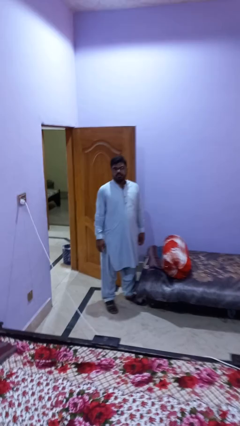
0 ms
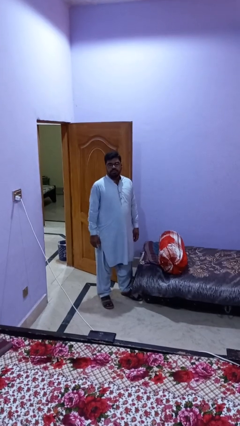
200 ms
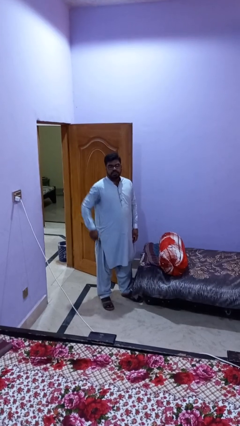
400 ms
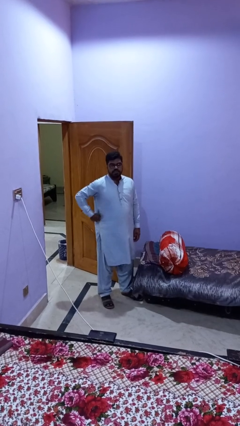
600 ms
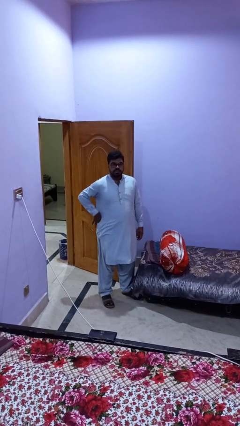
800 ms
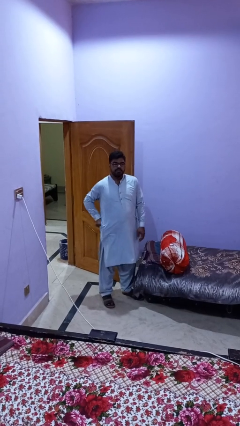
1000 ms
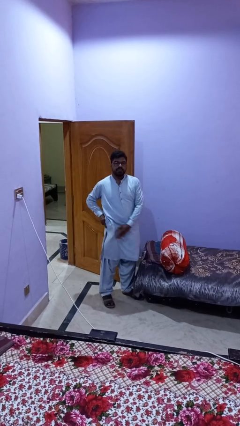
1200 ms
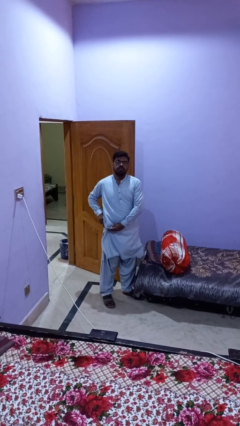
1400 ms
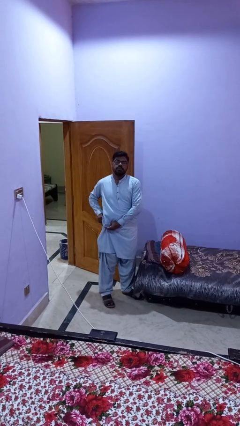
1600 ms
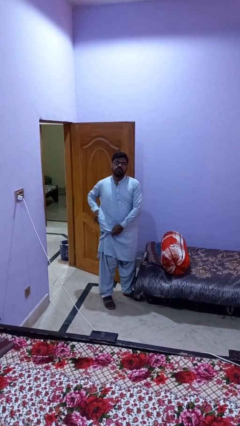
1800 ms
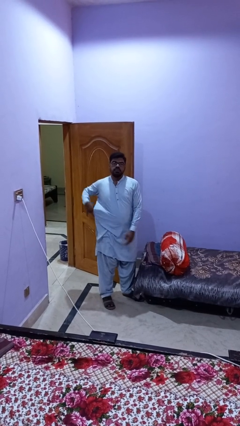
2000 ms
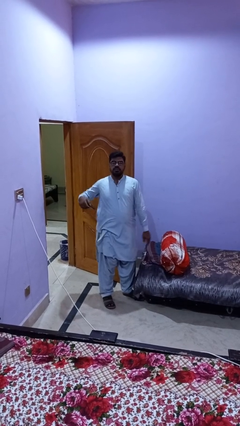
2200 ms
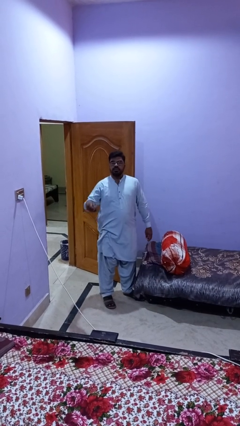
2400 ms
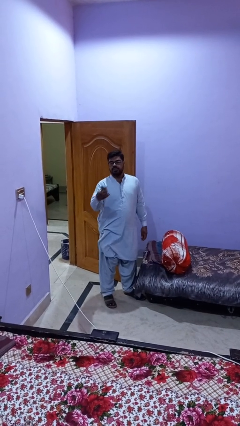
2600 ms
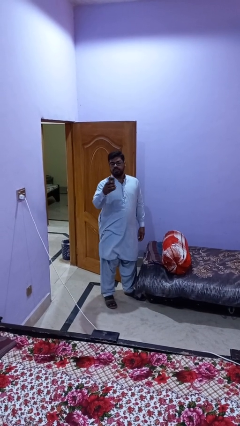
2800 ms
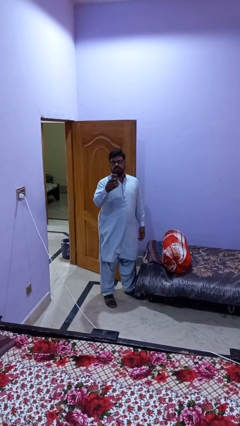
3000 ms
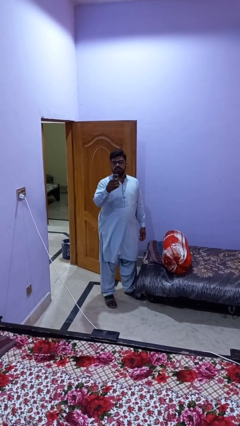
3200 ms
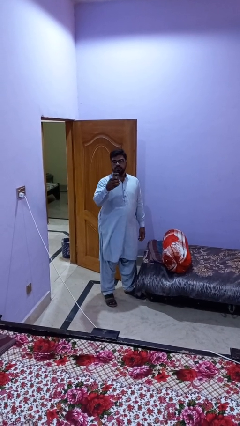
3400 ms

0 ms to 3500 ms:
person takes phone from pocket

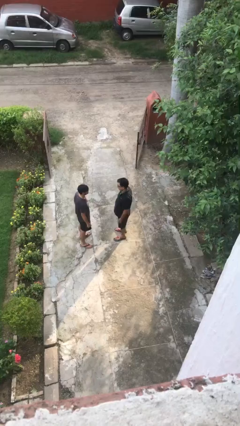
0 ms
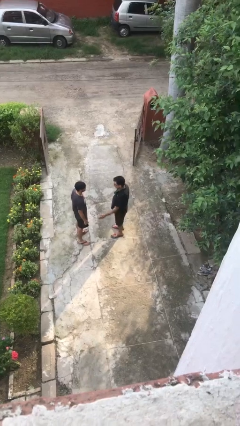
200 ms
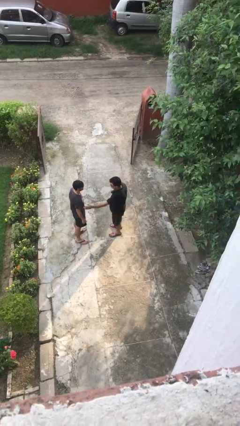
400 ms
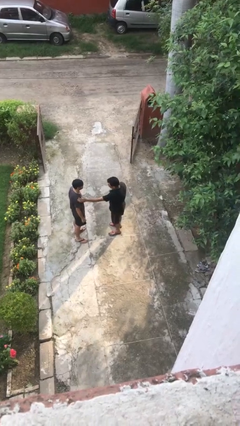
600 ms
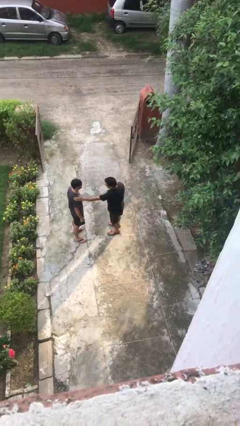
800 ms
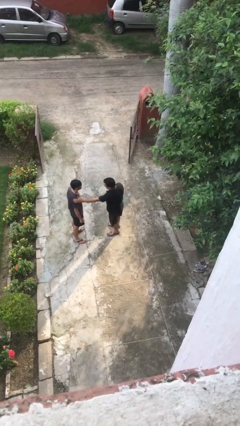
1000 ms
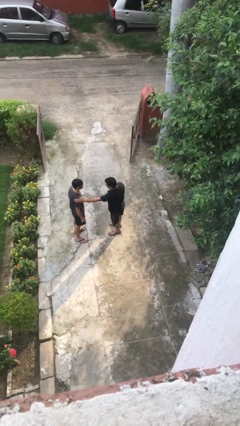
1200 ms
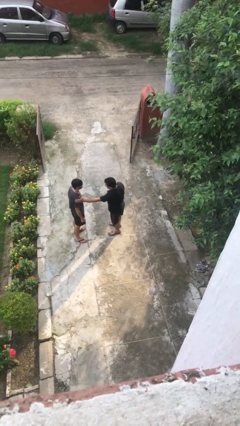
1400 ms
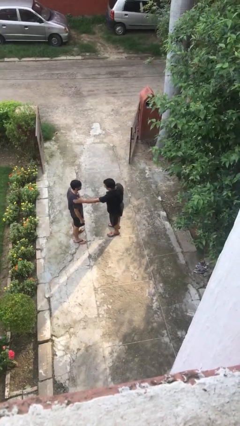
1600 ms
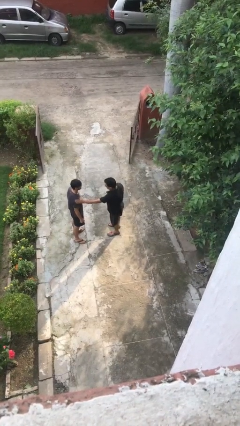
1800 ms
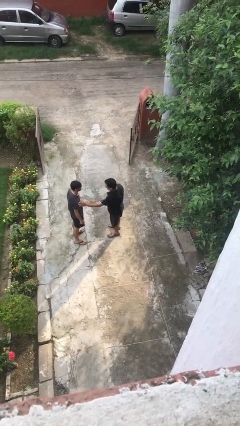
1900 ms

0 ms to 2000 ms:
person pounds shoulders of person

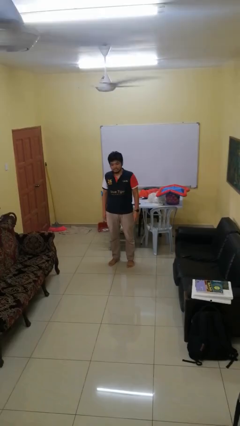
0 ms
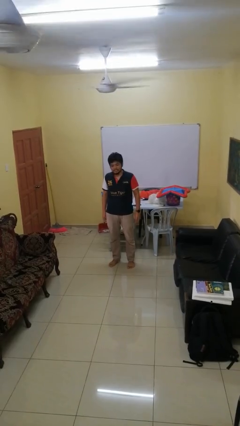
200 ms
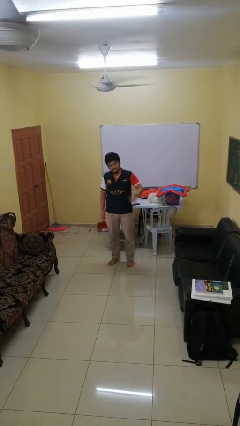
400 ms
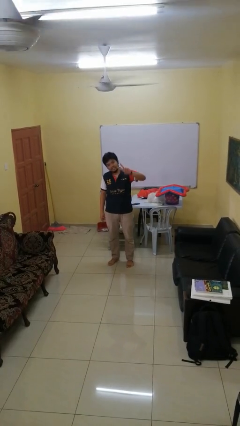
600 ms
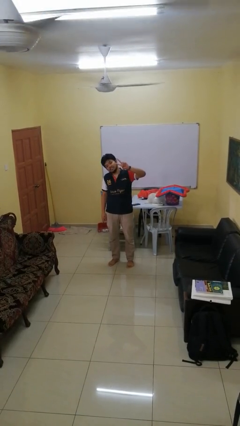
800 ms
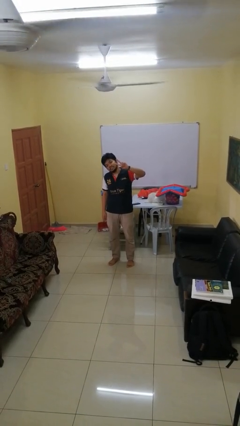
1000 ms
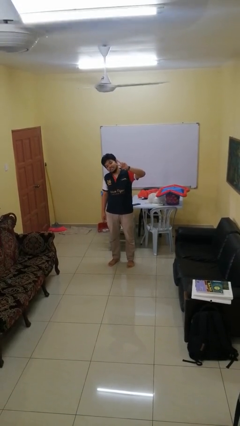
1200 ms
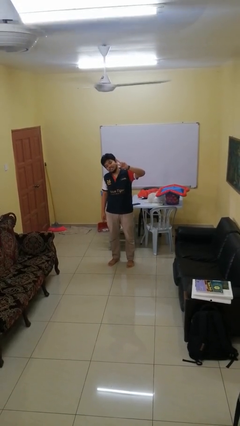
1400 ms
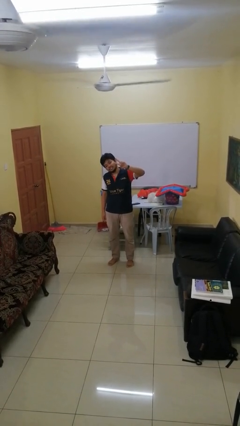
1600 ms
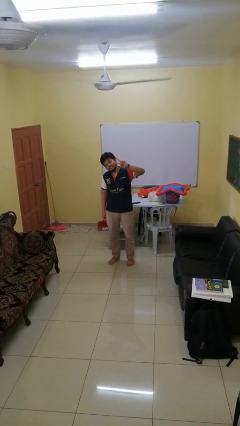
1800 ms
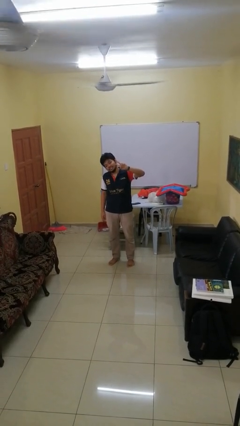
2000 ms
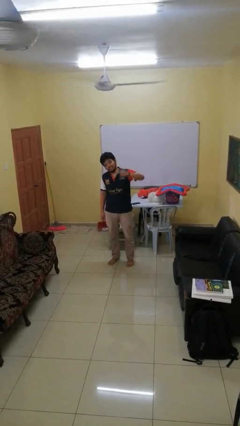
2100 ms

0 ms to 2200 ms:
person gestures peace

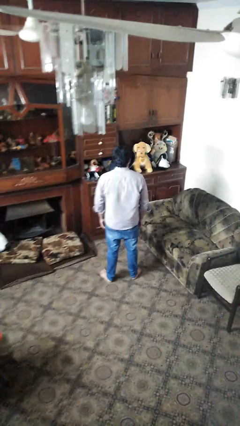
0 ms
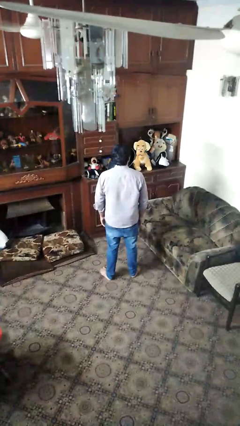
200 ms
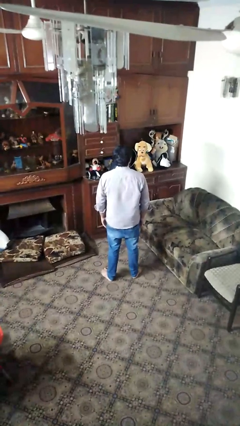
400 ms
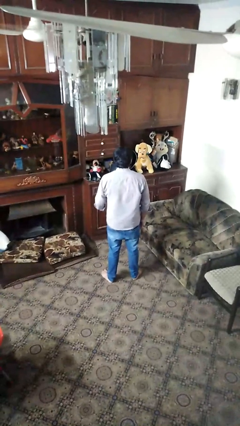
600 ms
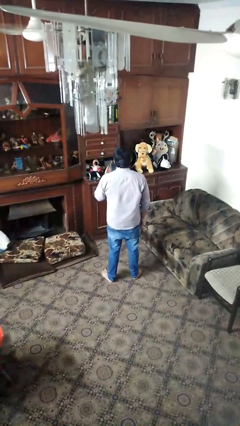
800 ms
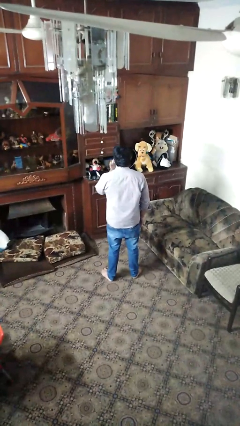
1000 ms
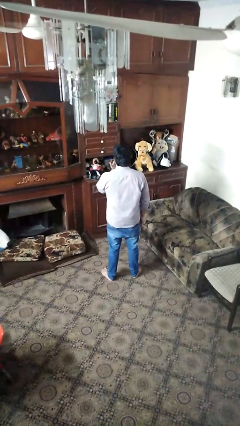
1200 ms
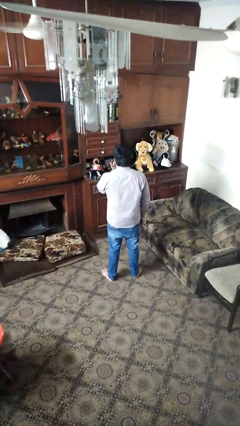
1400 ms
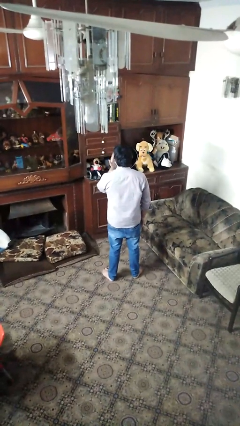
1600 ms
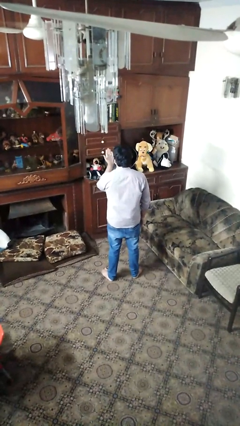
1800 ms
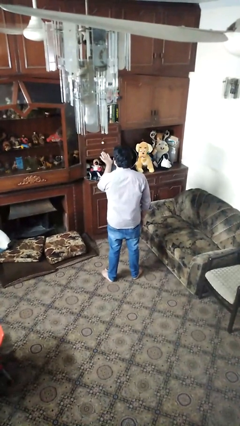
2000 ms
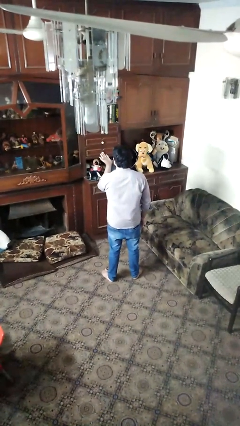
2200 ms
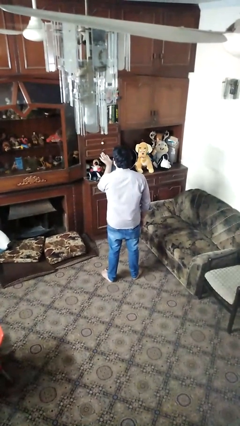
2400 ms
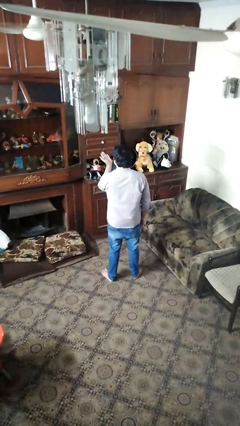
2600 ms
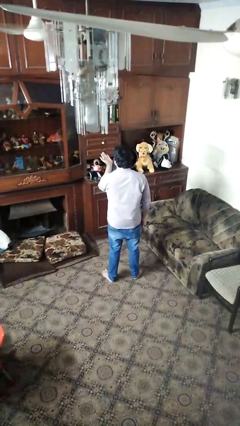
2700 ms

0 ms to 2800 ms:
person gestures blow kiss

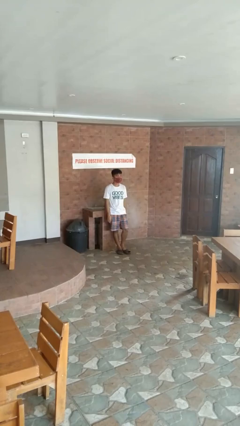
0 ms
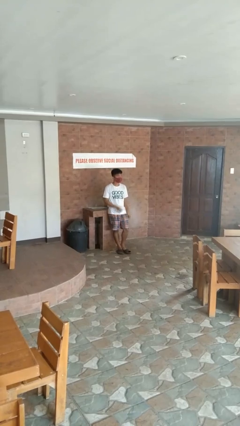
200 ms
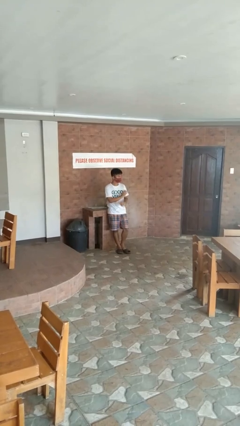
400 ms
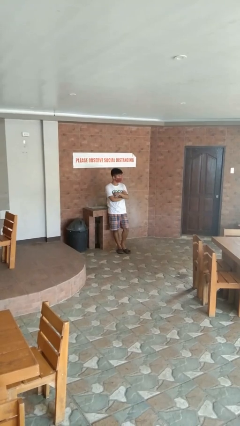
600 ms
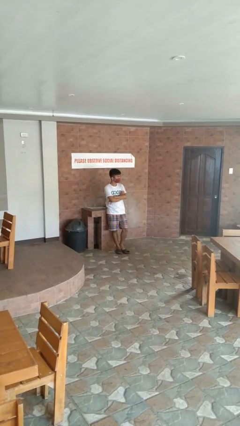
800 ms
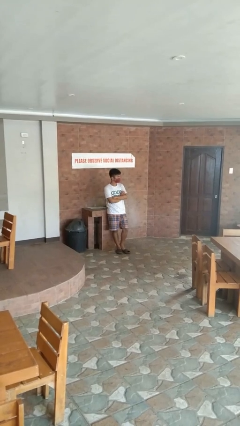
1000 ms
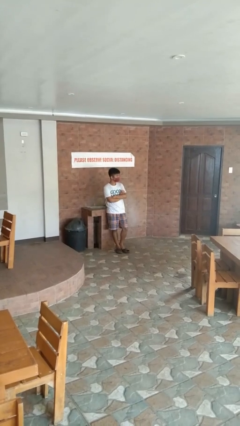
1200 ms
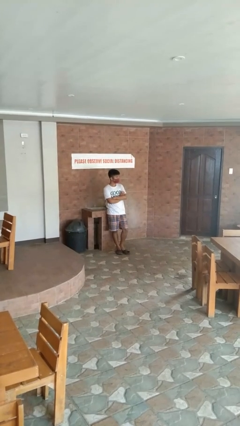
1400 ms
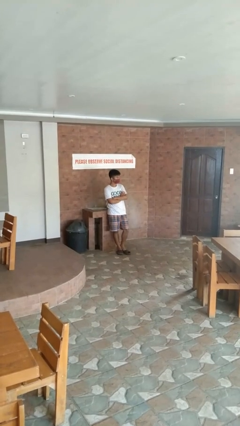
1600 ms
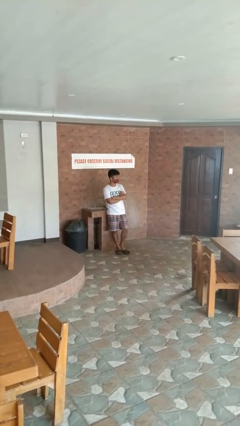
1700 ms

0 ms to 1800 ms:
person crosses arms

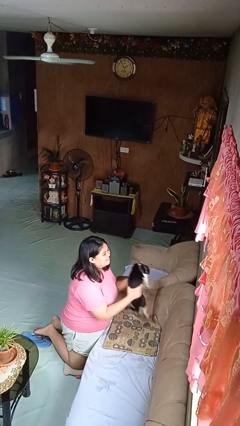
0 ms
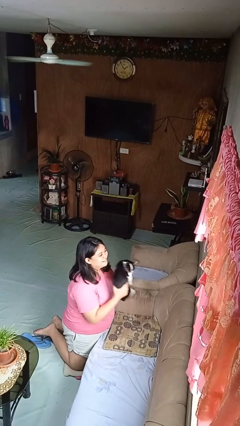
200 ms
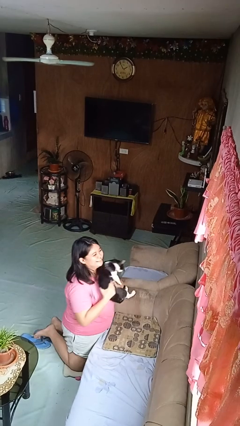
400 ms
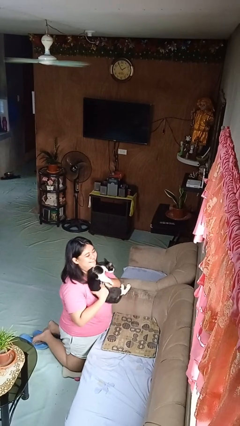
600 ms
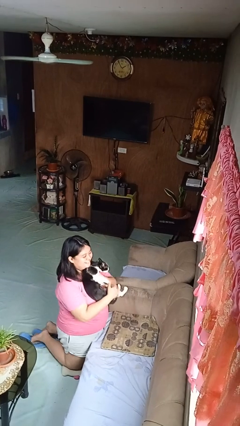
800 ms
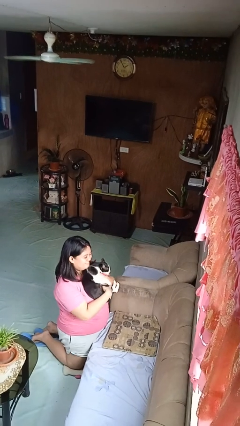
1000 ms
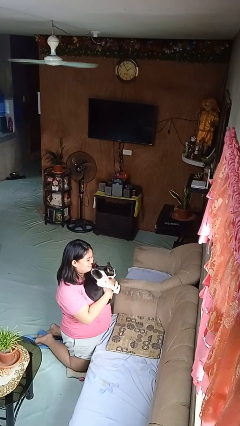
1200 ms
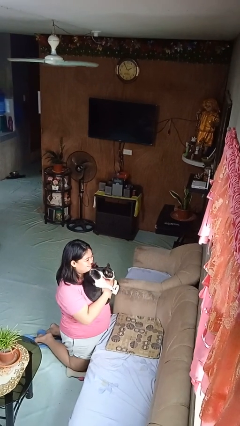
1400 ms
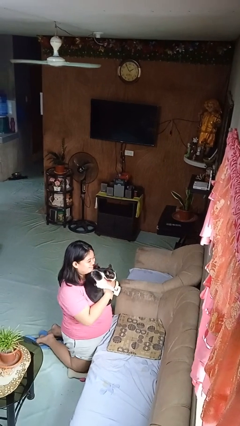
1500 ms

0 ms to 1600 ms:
person hugs cat

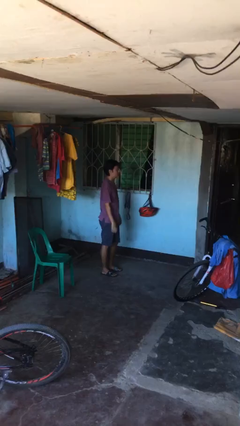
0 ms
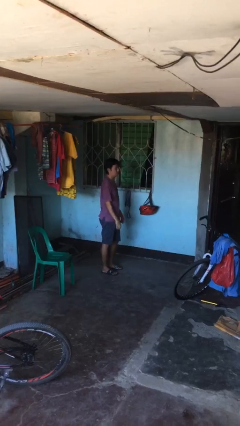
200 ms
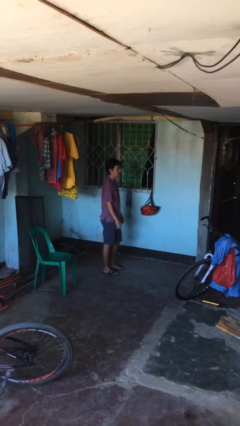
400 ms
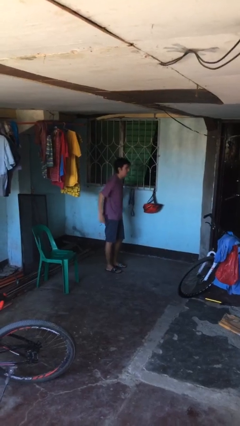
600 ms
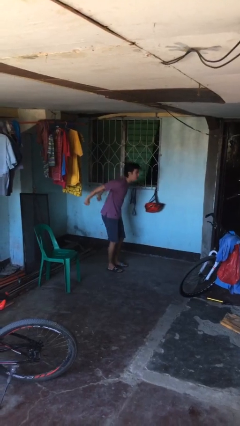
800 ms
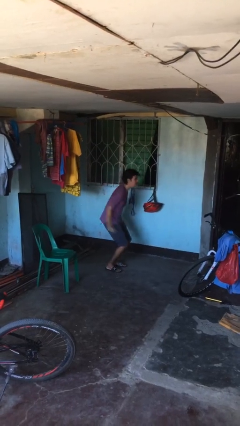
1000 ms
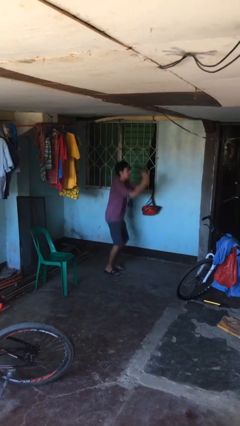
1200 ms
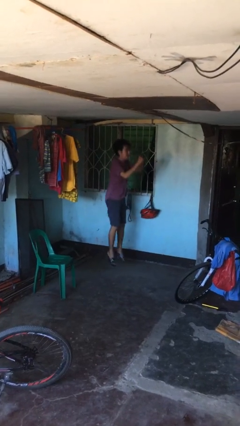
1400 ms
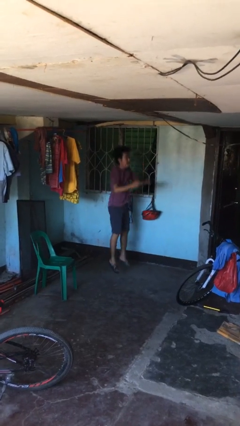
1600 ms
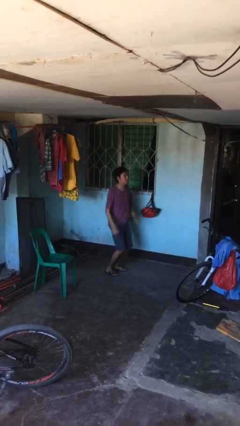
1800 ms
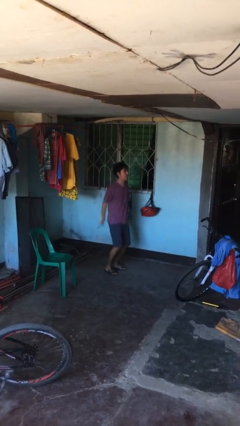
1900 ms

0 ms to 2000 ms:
person jumps

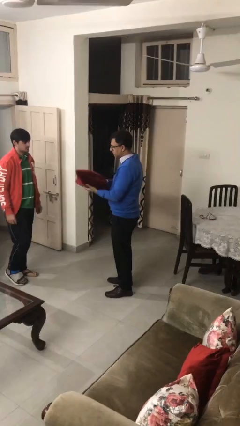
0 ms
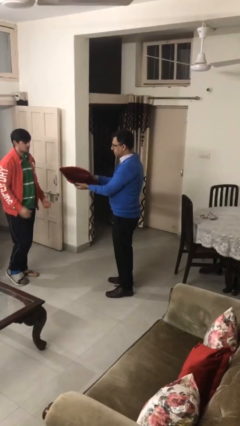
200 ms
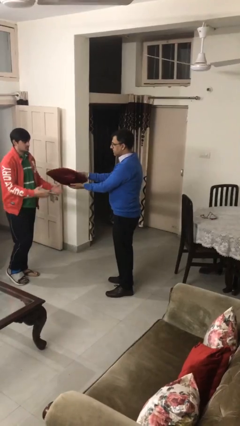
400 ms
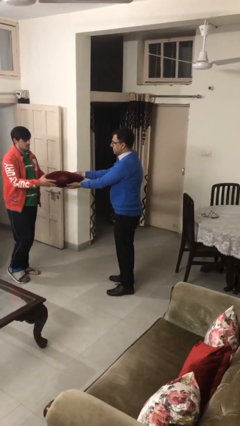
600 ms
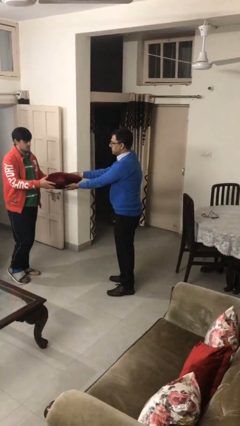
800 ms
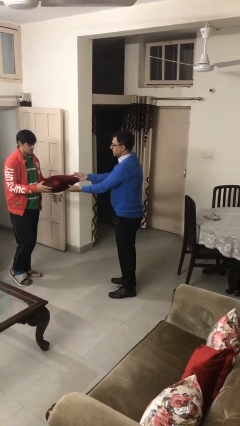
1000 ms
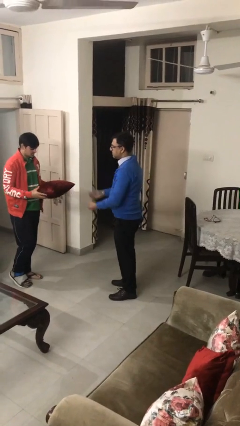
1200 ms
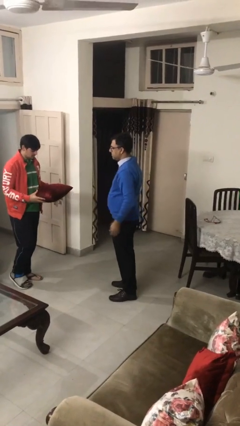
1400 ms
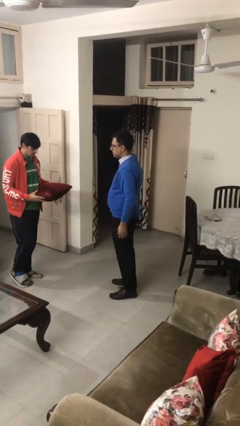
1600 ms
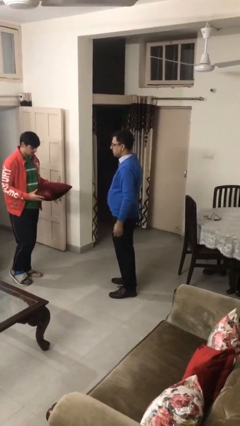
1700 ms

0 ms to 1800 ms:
person transfers object to person
